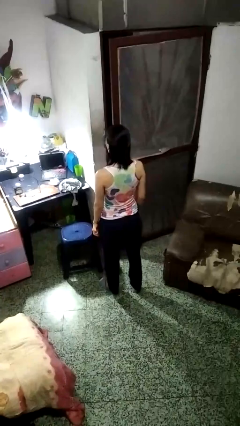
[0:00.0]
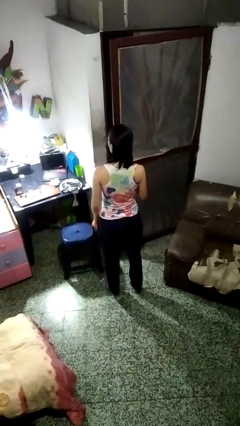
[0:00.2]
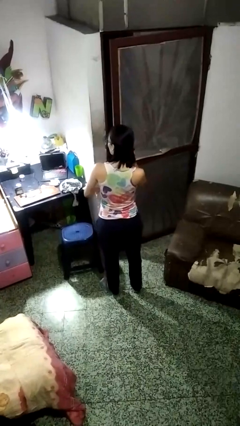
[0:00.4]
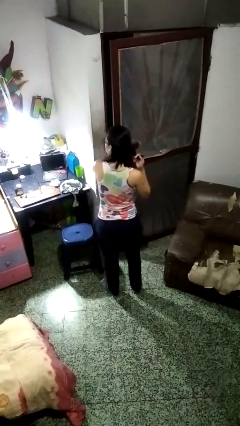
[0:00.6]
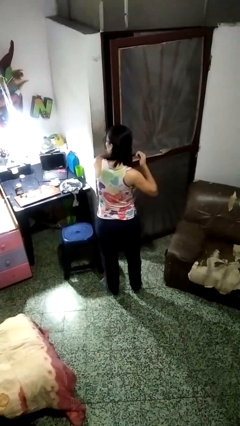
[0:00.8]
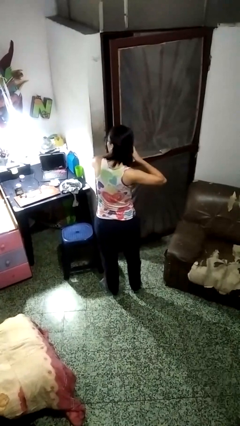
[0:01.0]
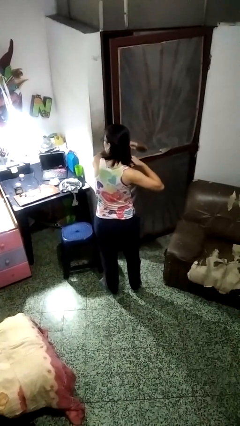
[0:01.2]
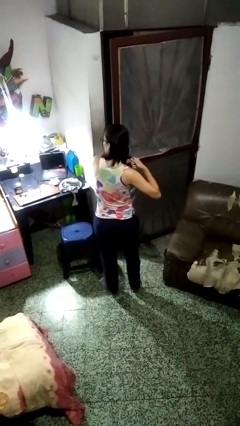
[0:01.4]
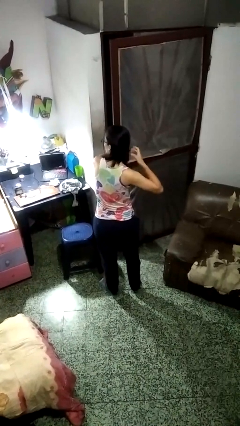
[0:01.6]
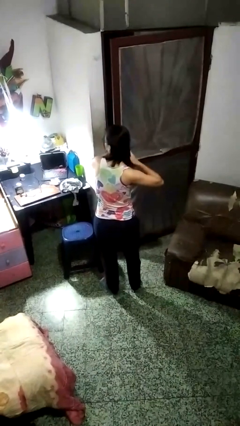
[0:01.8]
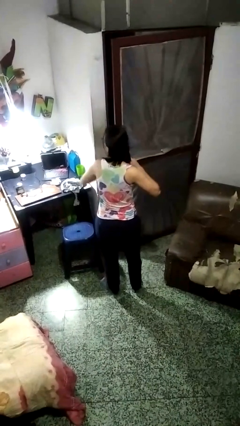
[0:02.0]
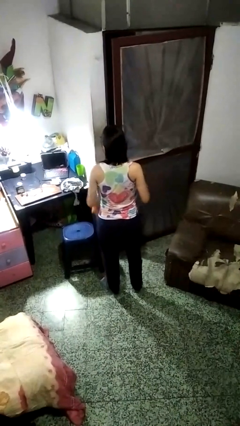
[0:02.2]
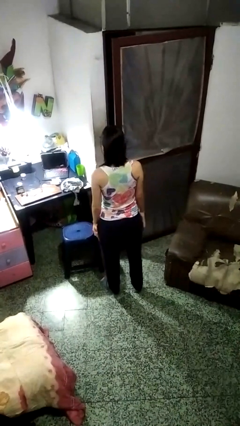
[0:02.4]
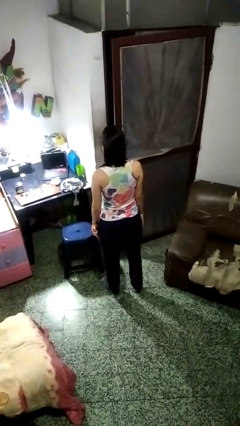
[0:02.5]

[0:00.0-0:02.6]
person brushes hair

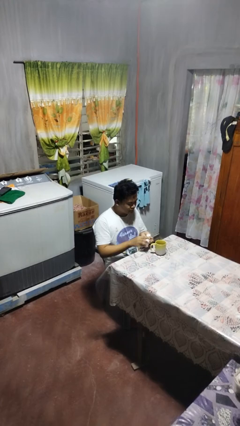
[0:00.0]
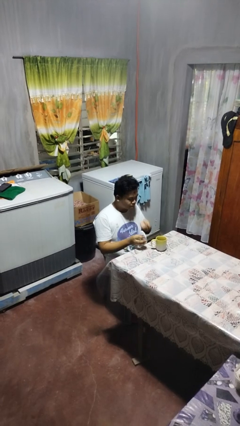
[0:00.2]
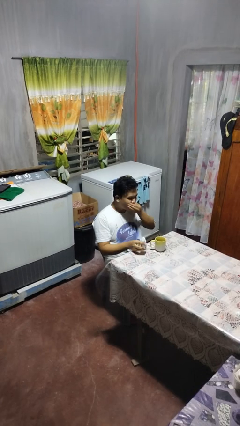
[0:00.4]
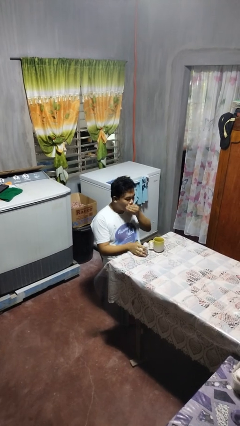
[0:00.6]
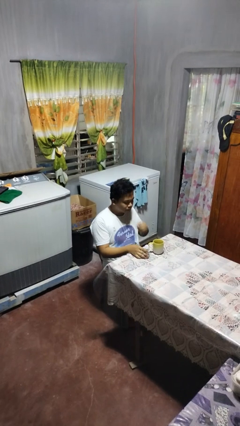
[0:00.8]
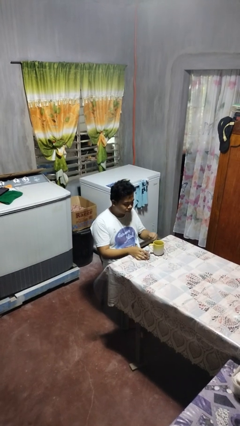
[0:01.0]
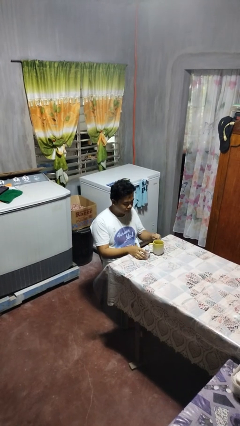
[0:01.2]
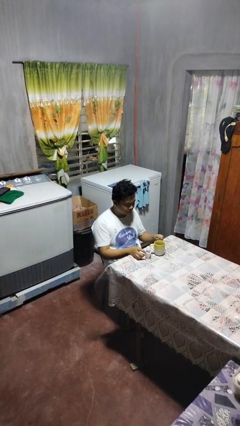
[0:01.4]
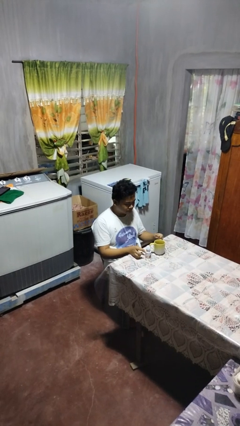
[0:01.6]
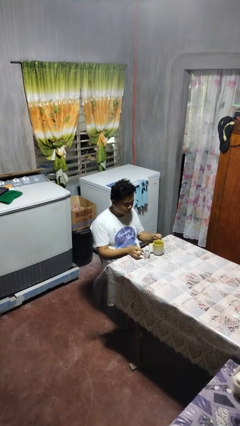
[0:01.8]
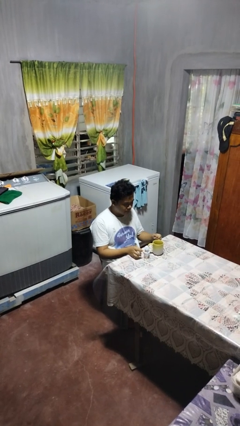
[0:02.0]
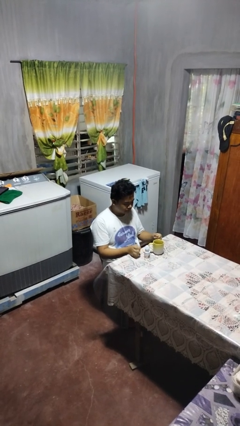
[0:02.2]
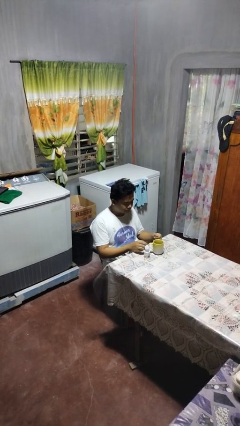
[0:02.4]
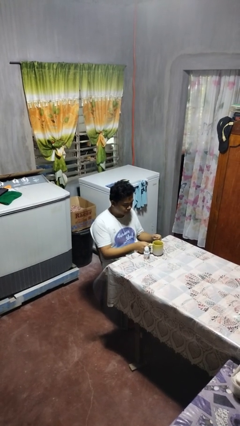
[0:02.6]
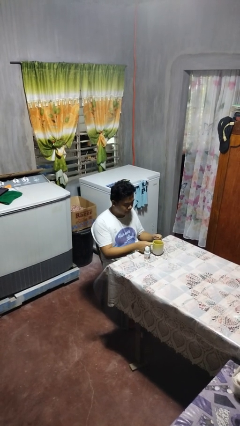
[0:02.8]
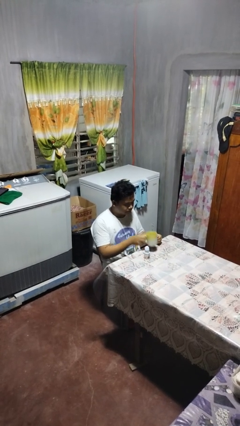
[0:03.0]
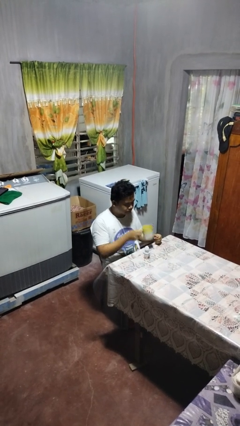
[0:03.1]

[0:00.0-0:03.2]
person takes medicine pills

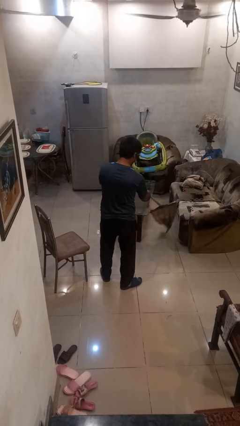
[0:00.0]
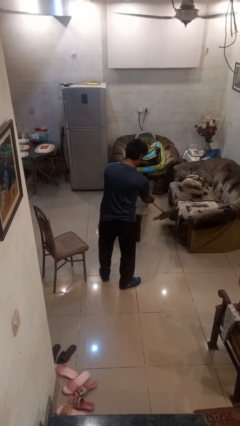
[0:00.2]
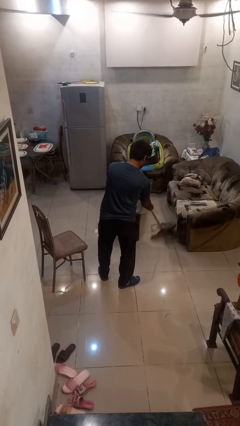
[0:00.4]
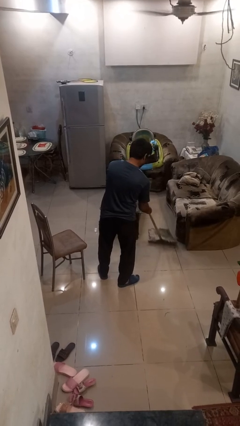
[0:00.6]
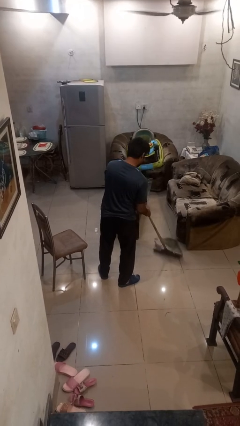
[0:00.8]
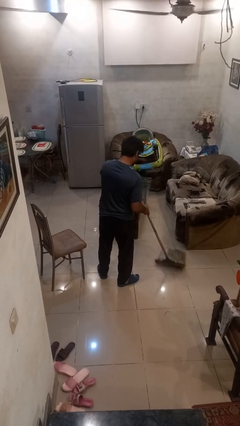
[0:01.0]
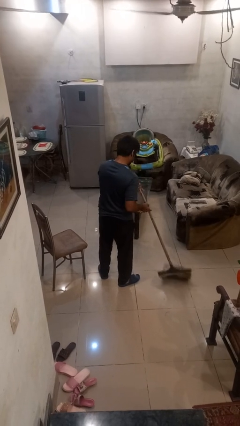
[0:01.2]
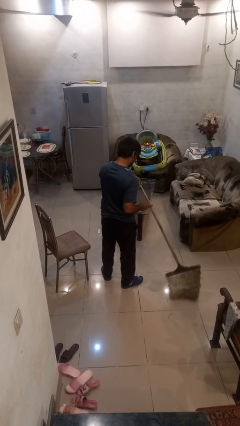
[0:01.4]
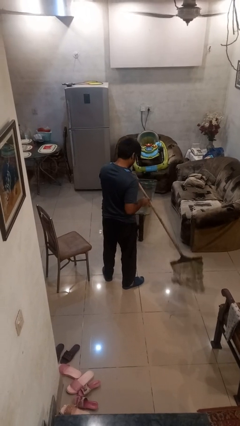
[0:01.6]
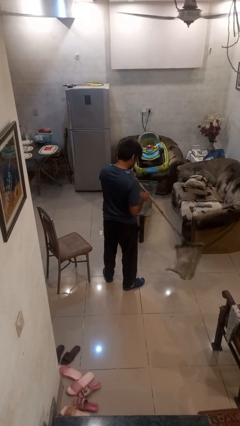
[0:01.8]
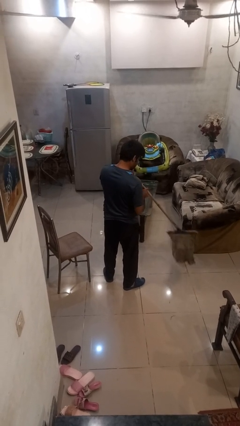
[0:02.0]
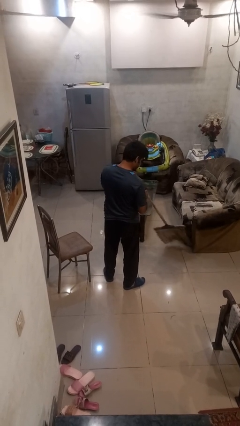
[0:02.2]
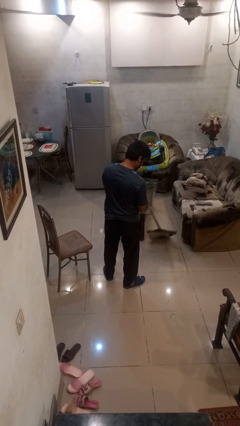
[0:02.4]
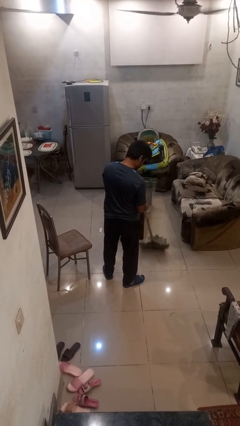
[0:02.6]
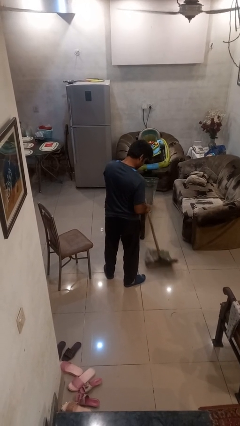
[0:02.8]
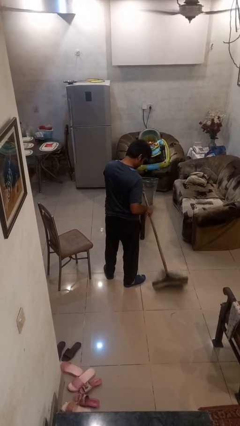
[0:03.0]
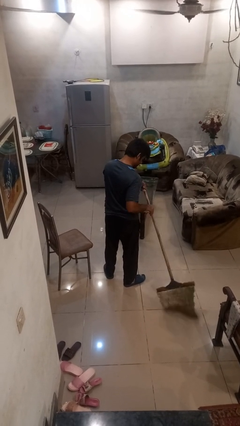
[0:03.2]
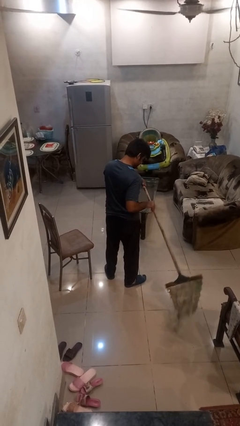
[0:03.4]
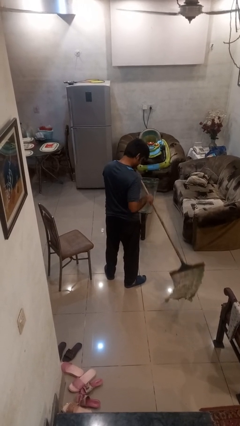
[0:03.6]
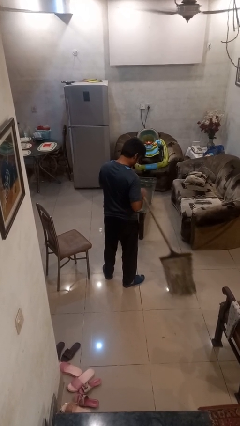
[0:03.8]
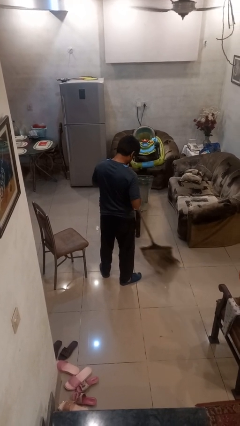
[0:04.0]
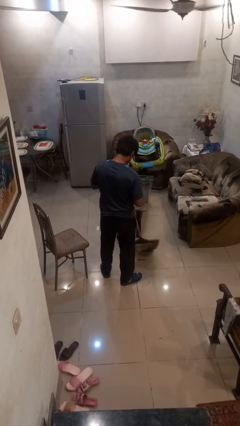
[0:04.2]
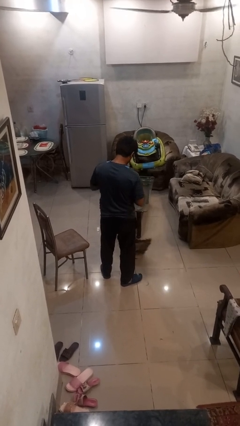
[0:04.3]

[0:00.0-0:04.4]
person mops

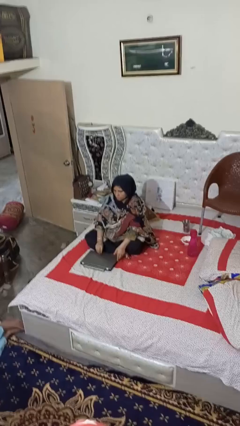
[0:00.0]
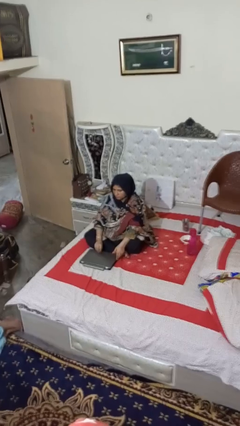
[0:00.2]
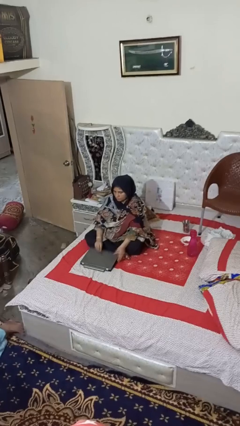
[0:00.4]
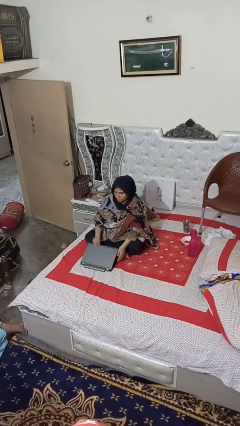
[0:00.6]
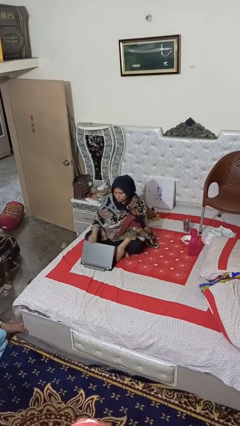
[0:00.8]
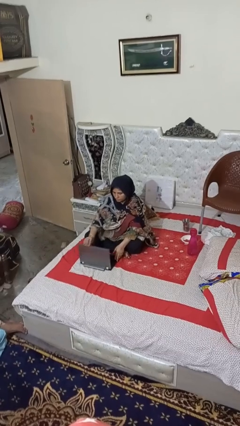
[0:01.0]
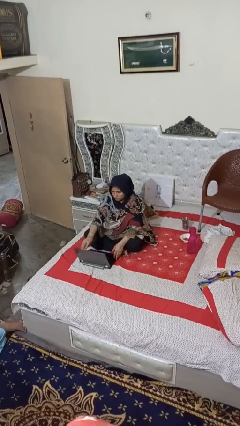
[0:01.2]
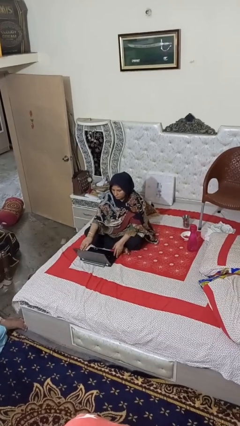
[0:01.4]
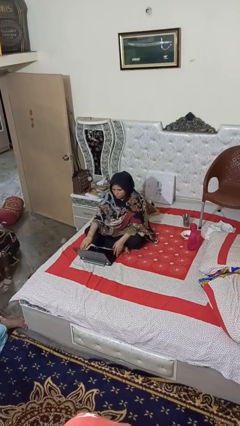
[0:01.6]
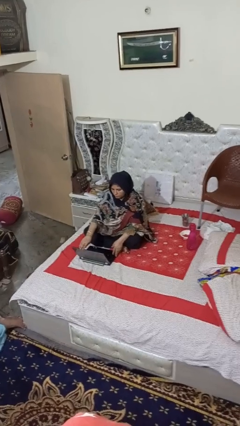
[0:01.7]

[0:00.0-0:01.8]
person opens laptop

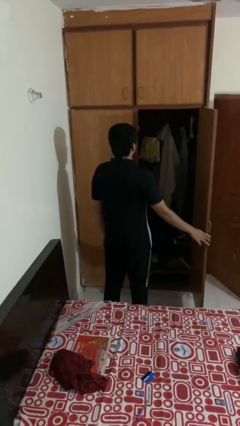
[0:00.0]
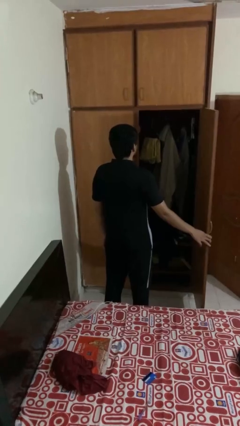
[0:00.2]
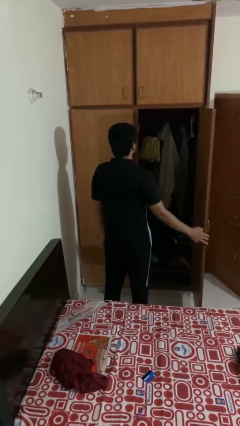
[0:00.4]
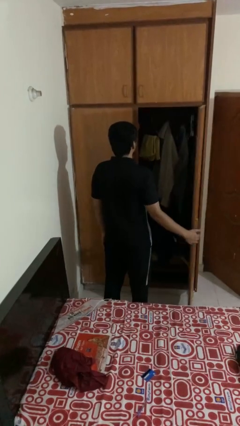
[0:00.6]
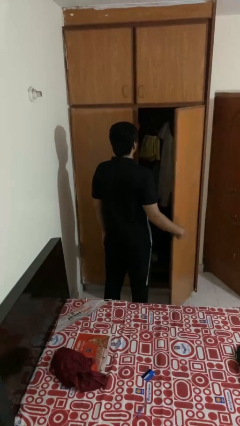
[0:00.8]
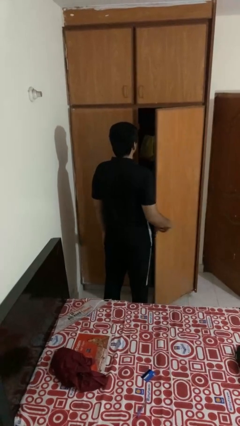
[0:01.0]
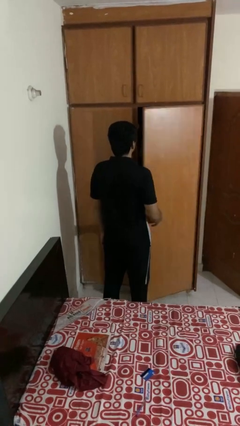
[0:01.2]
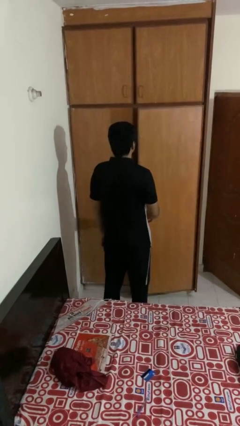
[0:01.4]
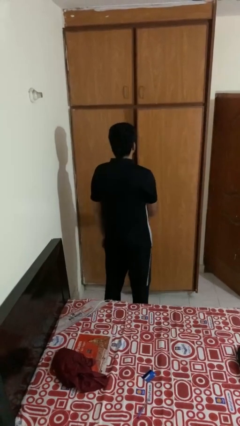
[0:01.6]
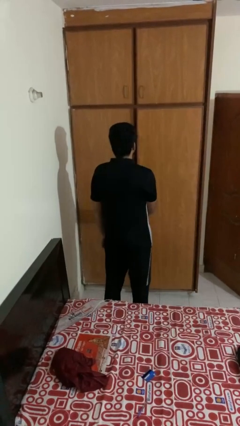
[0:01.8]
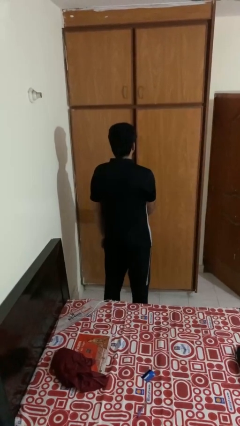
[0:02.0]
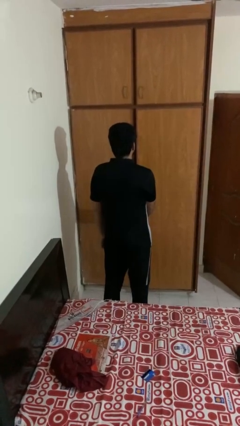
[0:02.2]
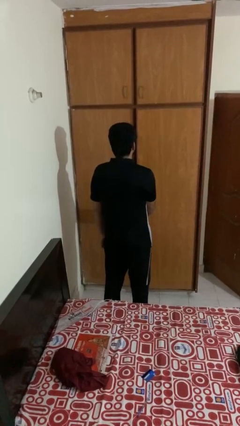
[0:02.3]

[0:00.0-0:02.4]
person closes closet door

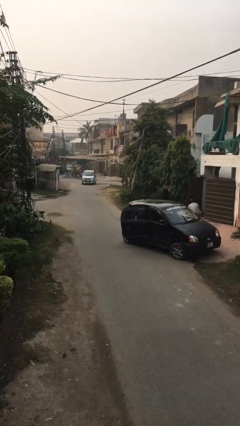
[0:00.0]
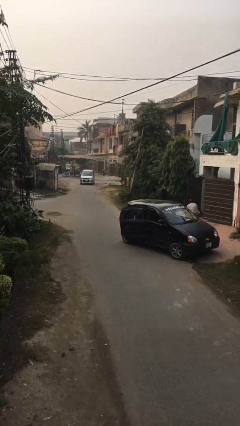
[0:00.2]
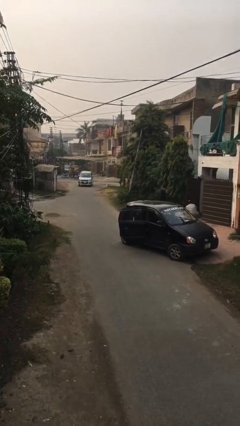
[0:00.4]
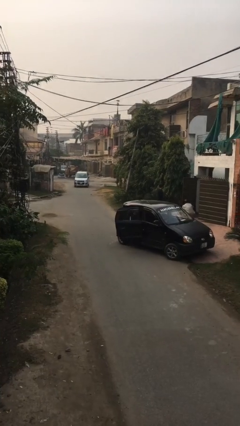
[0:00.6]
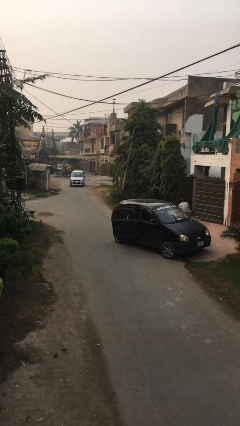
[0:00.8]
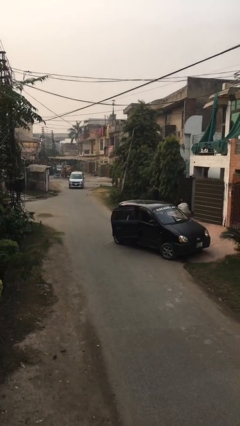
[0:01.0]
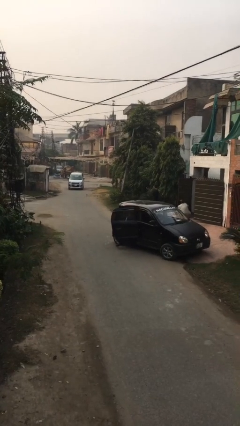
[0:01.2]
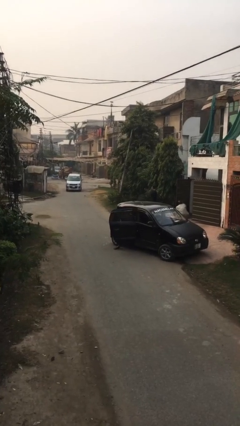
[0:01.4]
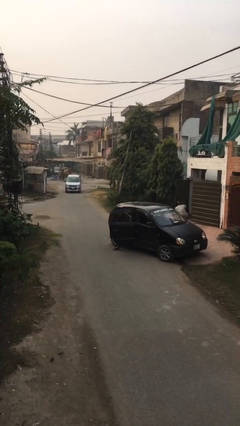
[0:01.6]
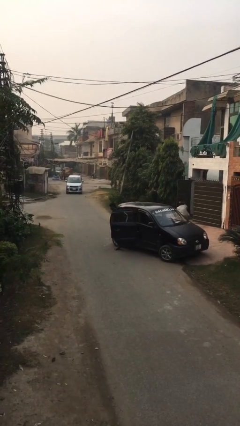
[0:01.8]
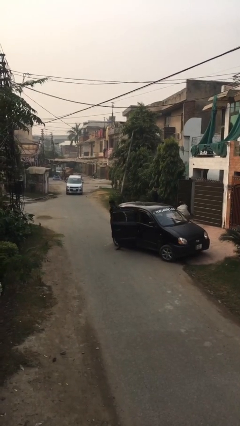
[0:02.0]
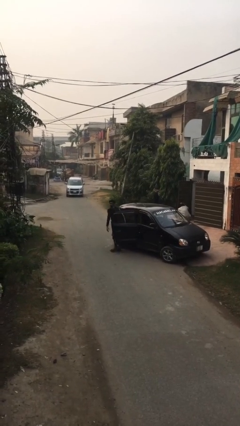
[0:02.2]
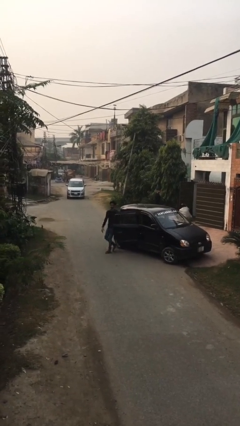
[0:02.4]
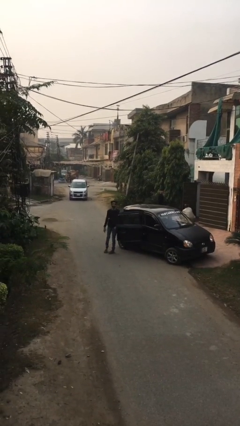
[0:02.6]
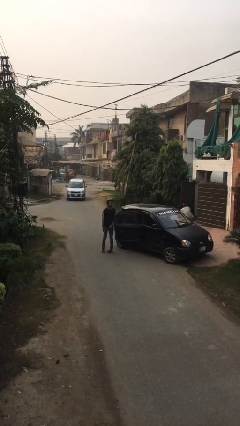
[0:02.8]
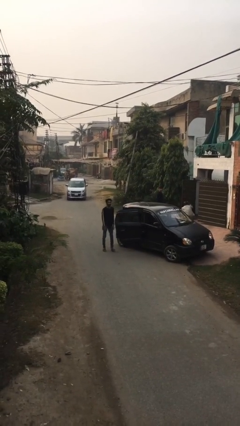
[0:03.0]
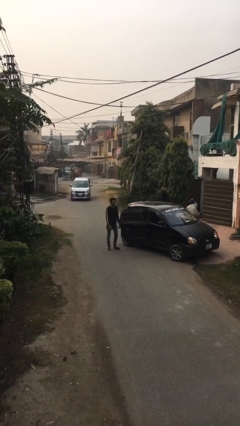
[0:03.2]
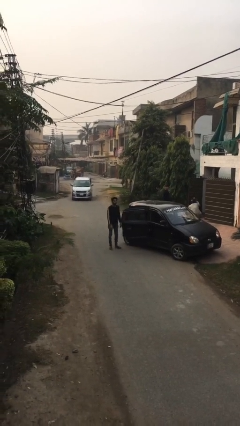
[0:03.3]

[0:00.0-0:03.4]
person exits car
